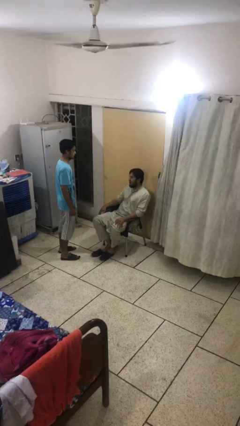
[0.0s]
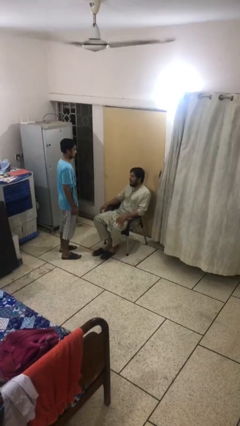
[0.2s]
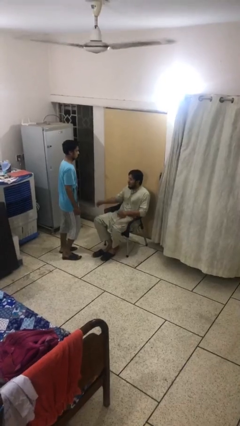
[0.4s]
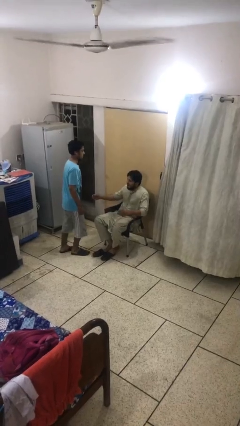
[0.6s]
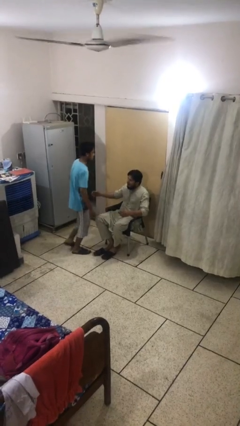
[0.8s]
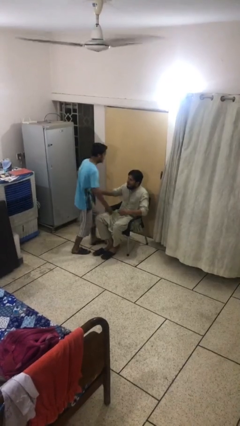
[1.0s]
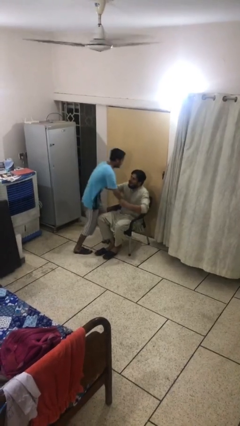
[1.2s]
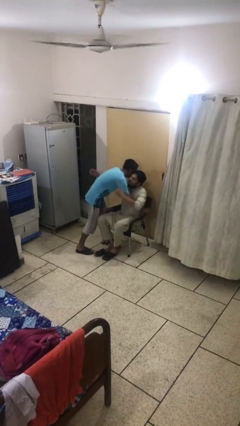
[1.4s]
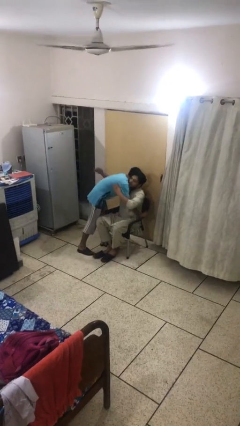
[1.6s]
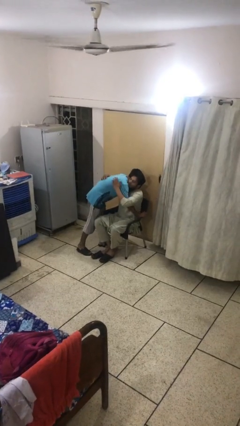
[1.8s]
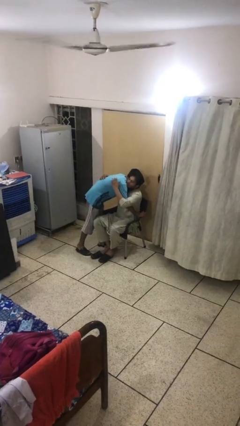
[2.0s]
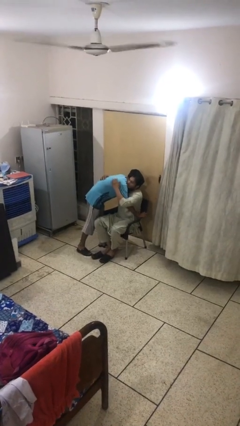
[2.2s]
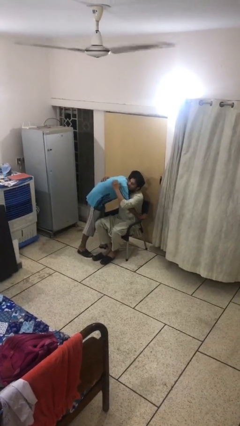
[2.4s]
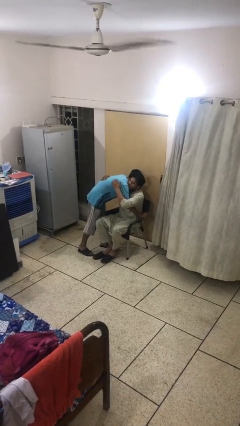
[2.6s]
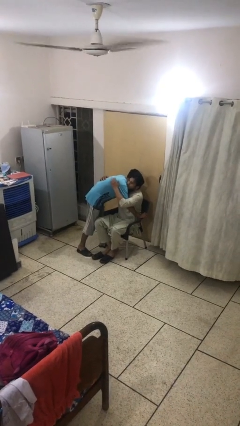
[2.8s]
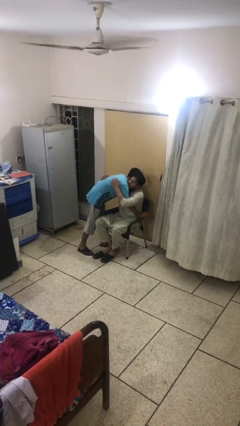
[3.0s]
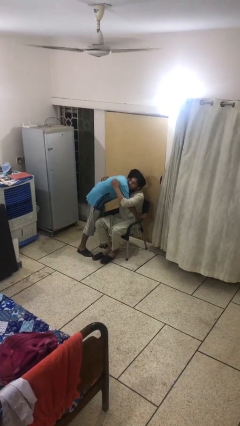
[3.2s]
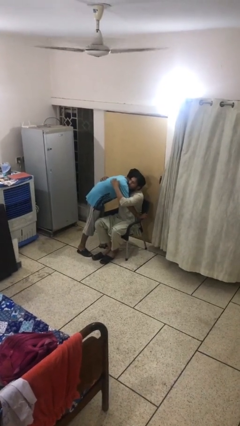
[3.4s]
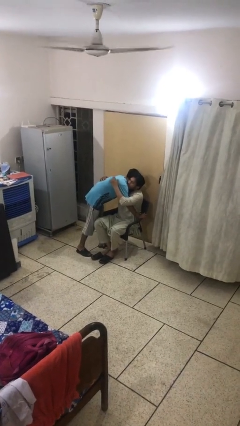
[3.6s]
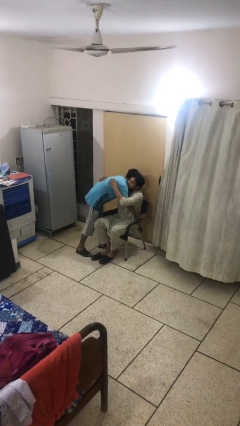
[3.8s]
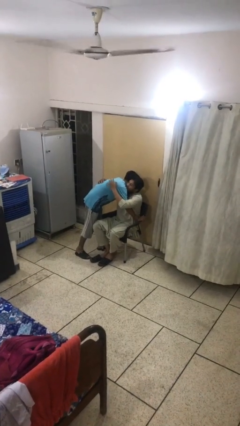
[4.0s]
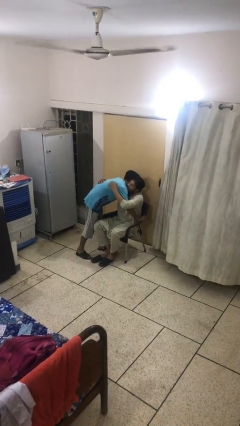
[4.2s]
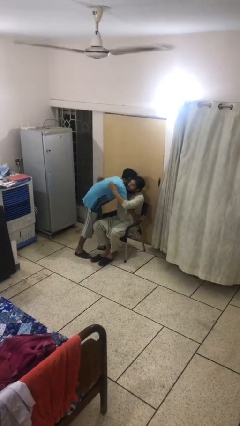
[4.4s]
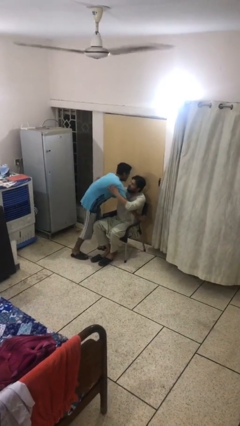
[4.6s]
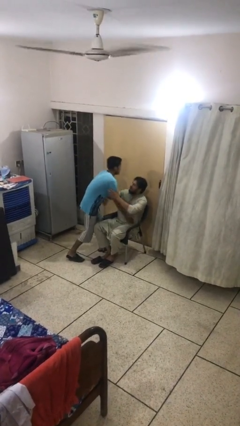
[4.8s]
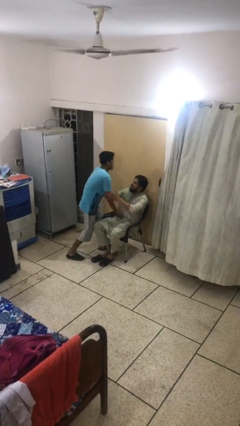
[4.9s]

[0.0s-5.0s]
person embraces person

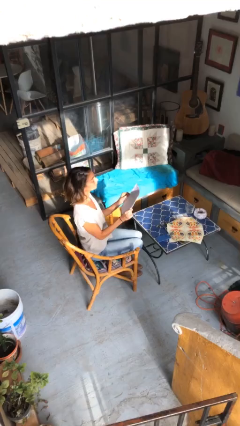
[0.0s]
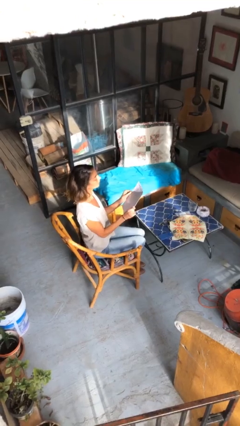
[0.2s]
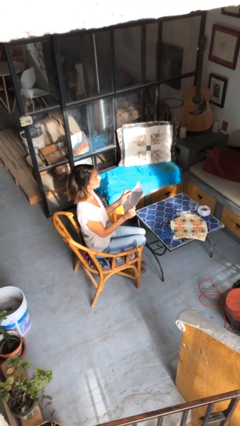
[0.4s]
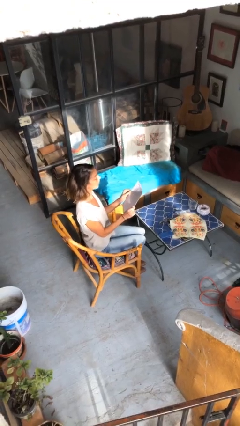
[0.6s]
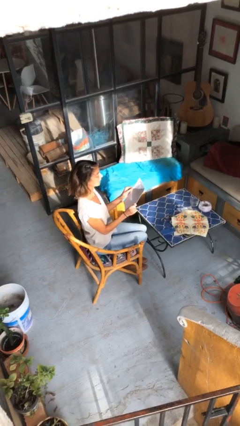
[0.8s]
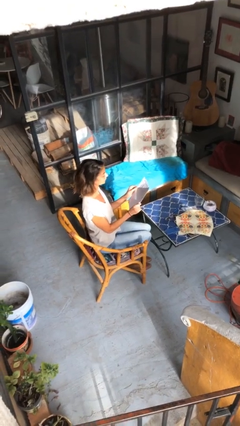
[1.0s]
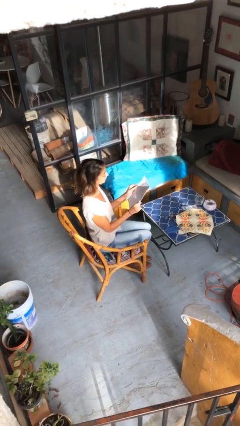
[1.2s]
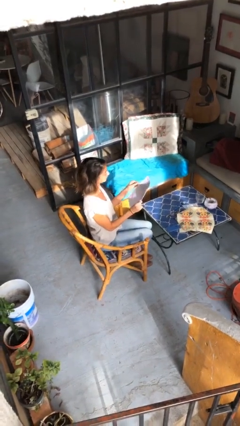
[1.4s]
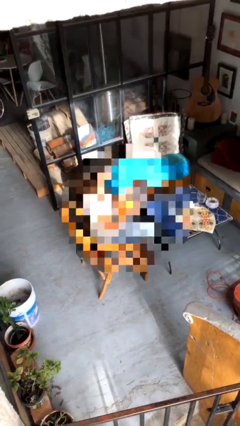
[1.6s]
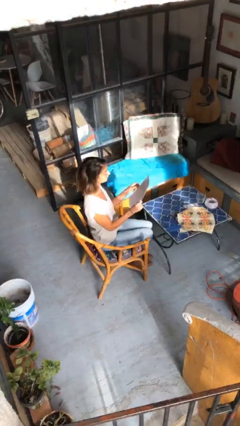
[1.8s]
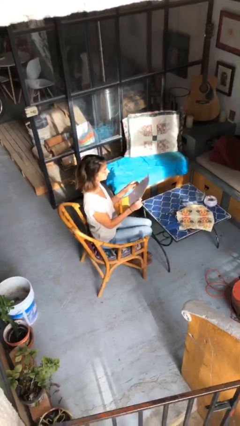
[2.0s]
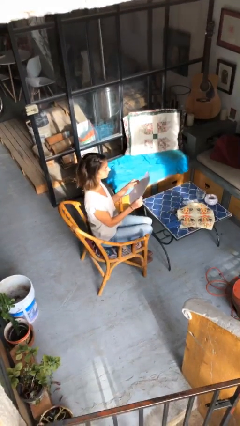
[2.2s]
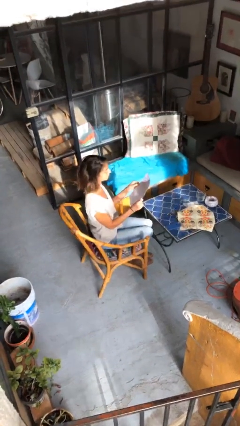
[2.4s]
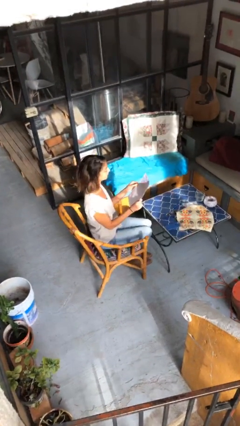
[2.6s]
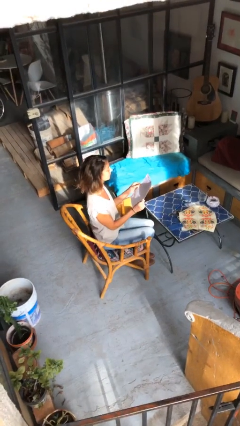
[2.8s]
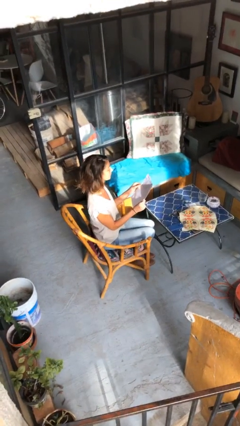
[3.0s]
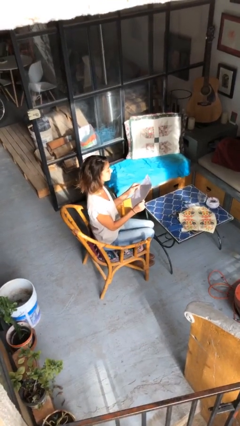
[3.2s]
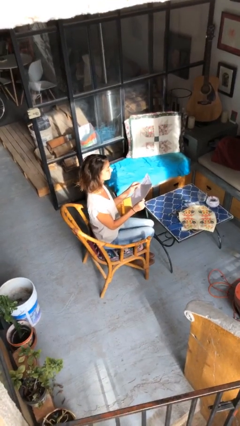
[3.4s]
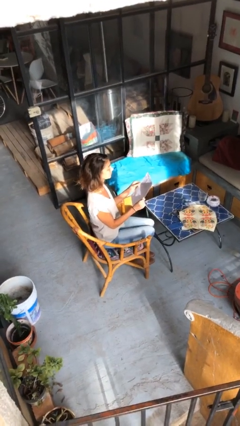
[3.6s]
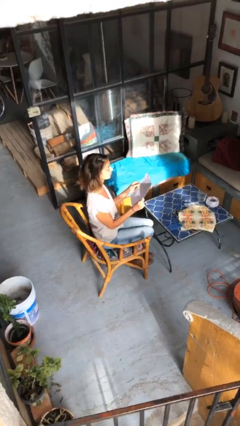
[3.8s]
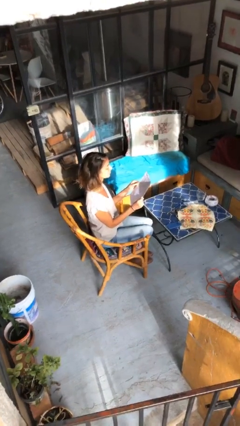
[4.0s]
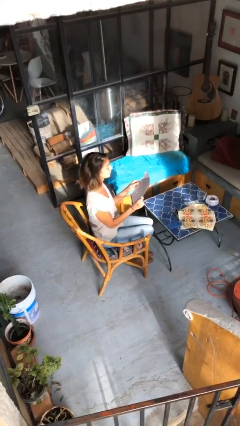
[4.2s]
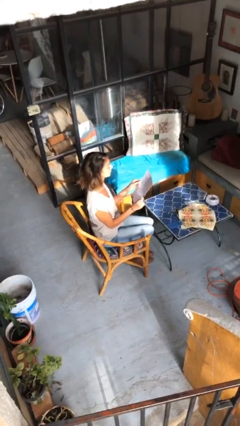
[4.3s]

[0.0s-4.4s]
person reads document

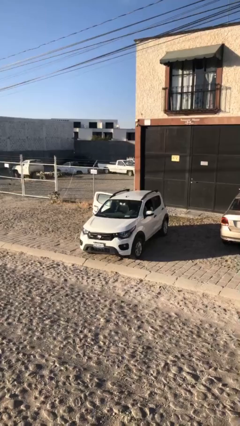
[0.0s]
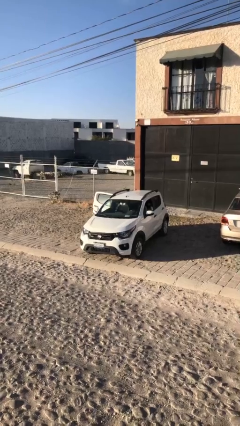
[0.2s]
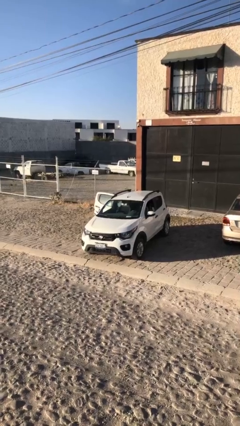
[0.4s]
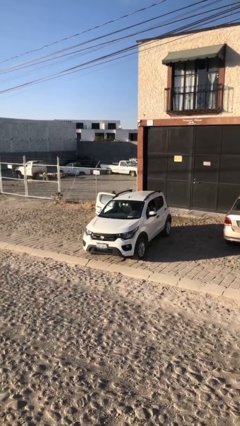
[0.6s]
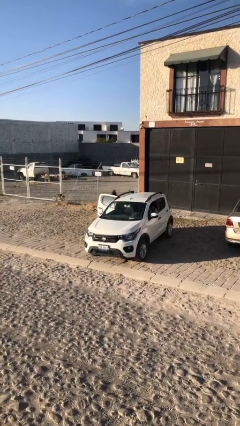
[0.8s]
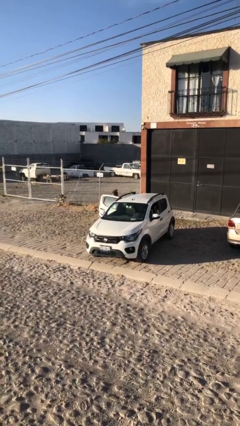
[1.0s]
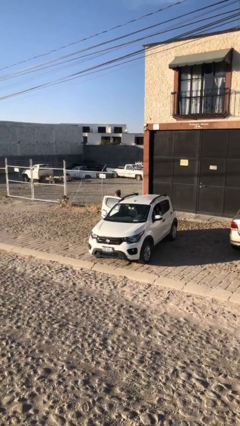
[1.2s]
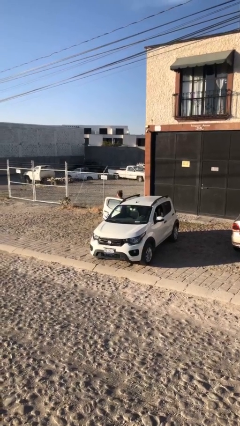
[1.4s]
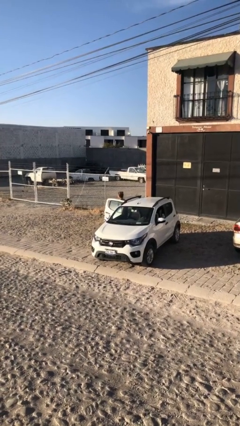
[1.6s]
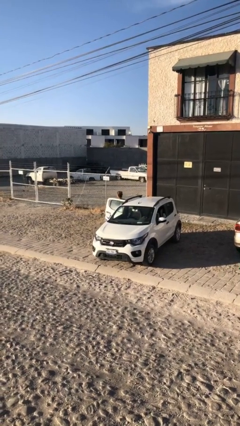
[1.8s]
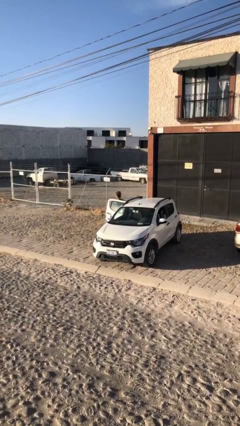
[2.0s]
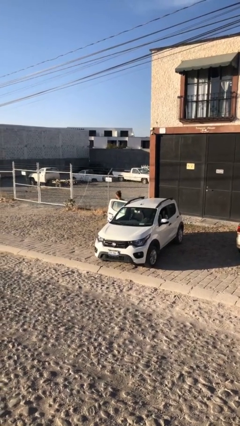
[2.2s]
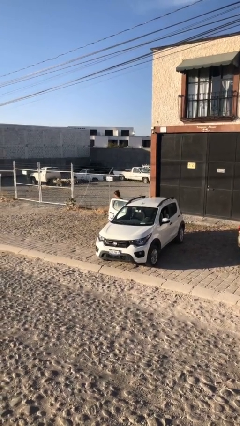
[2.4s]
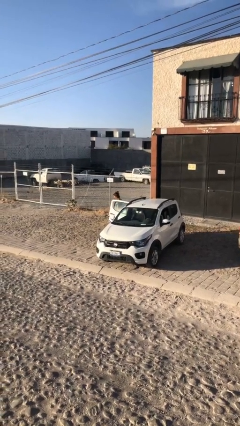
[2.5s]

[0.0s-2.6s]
person exits car

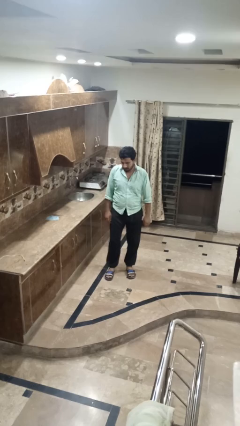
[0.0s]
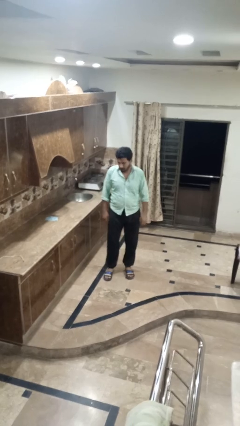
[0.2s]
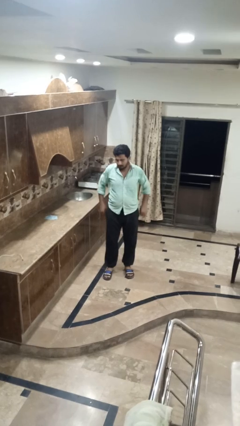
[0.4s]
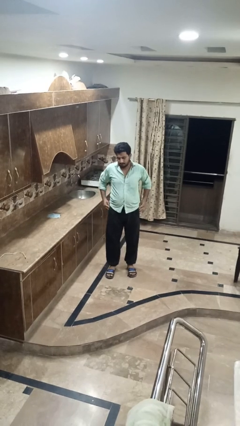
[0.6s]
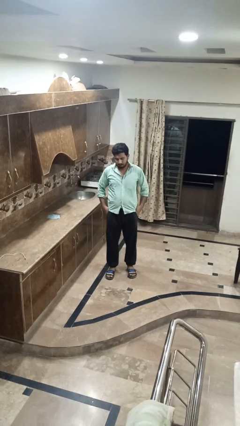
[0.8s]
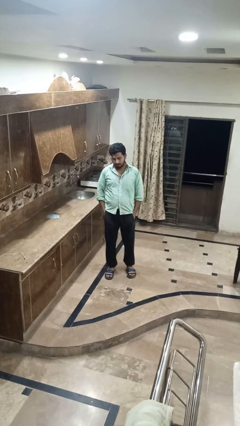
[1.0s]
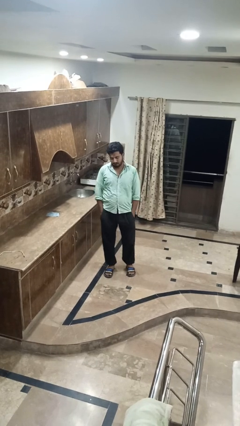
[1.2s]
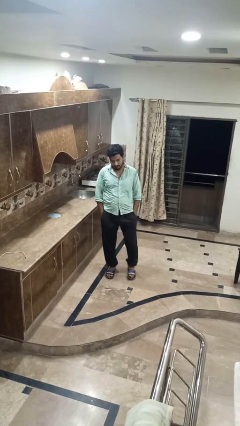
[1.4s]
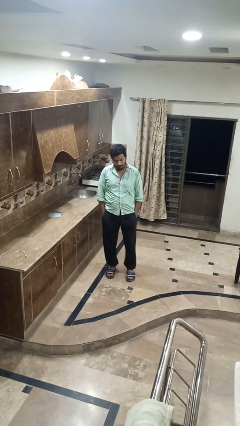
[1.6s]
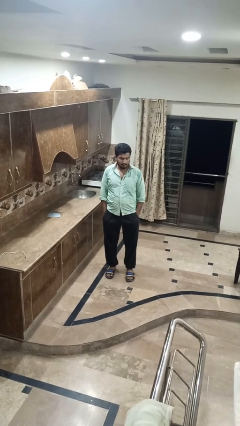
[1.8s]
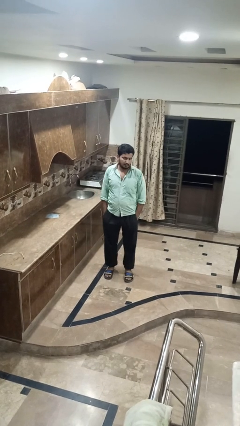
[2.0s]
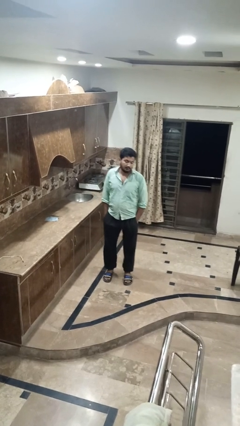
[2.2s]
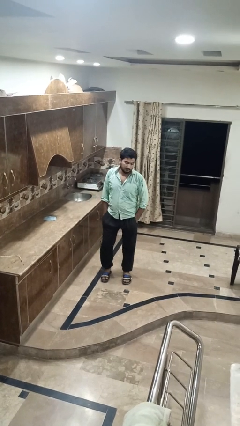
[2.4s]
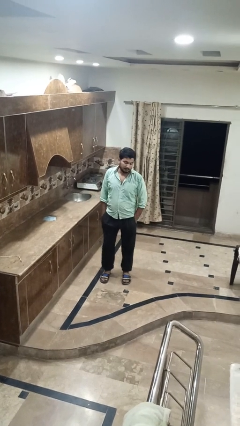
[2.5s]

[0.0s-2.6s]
person puts hands in back pockets

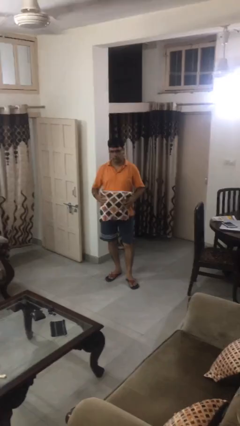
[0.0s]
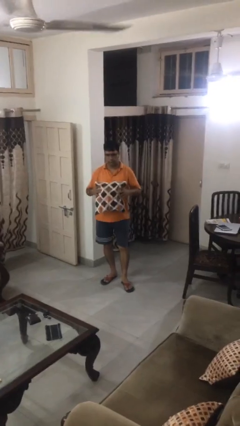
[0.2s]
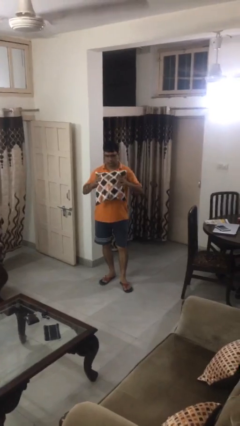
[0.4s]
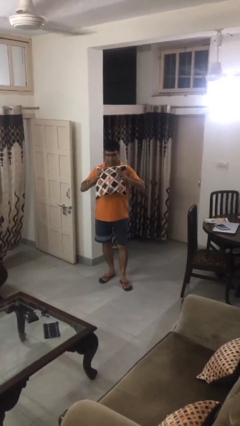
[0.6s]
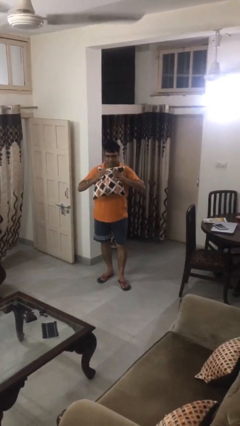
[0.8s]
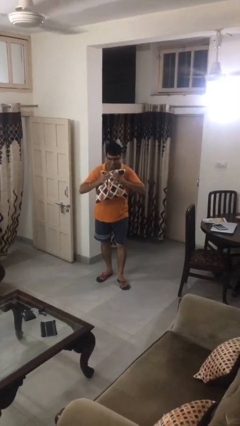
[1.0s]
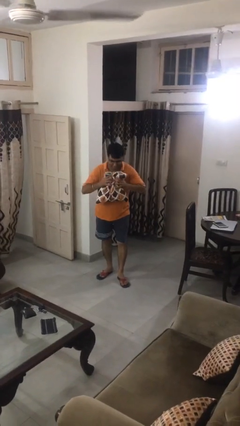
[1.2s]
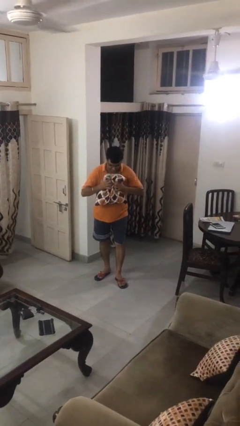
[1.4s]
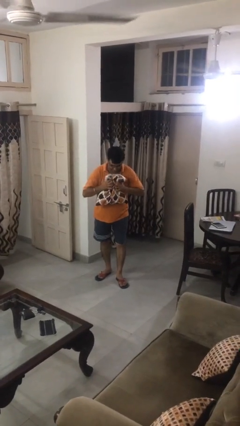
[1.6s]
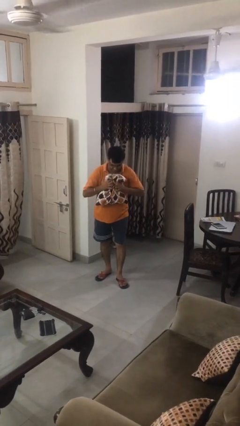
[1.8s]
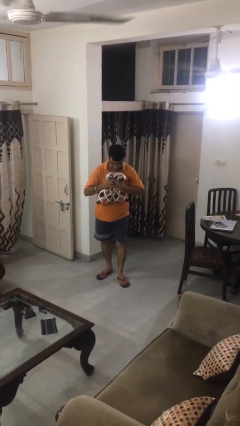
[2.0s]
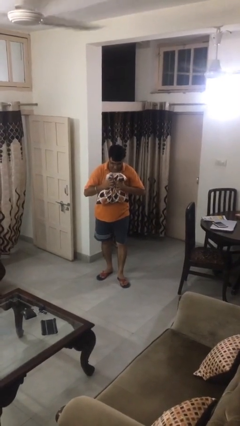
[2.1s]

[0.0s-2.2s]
person squeezes object

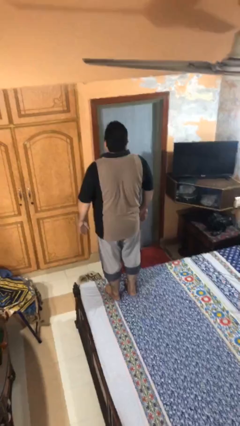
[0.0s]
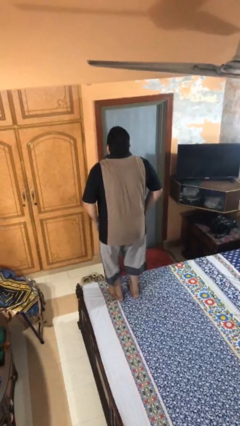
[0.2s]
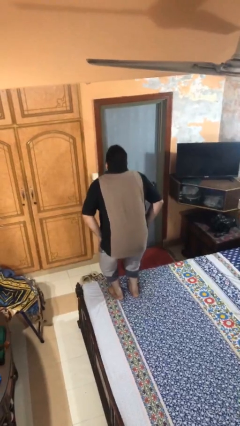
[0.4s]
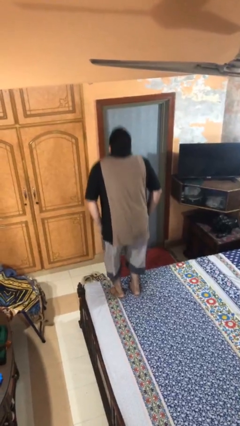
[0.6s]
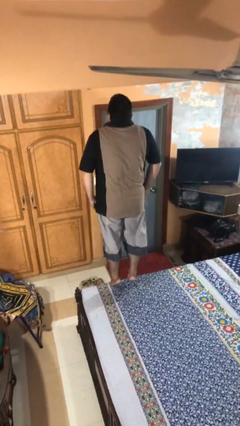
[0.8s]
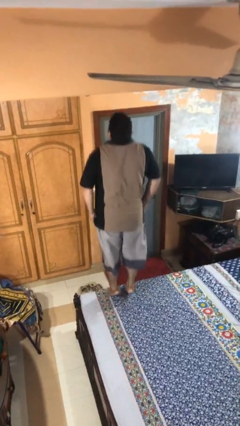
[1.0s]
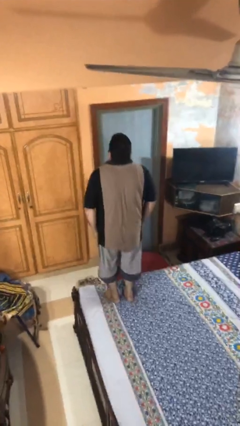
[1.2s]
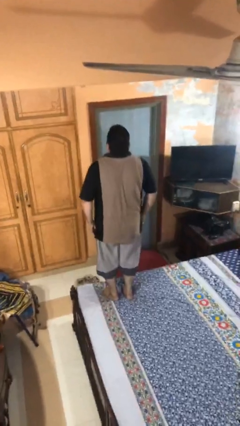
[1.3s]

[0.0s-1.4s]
person jumps on bed
